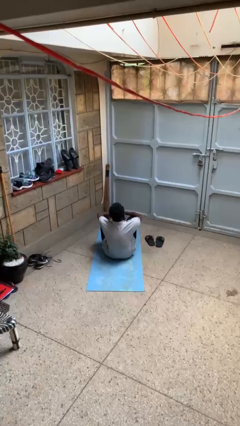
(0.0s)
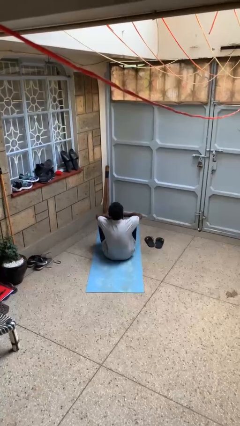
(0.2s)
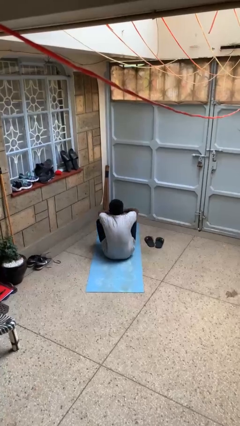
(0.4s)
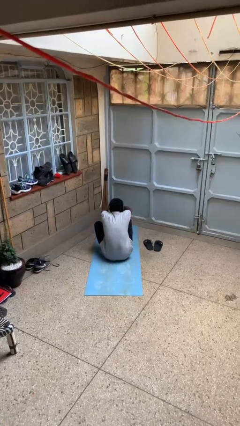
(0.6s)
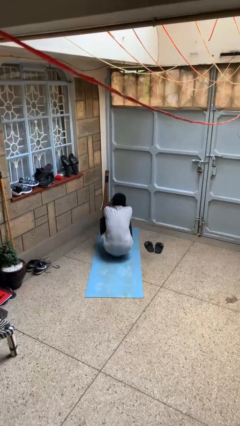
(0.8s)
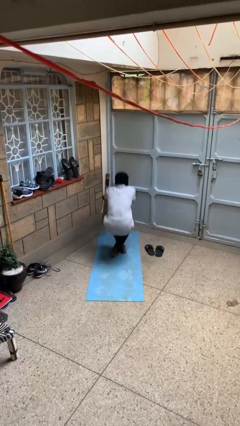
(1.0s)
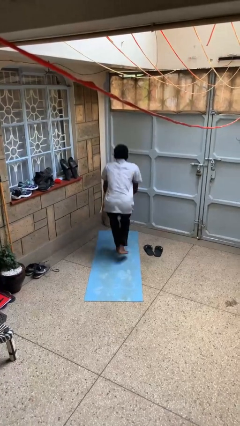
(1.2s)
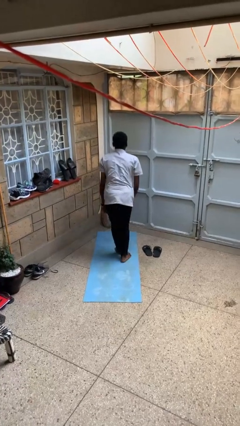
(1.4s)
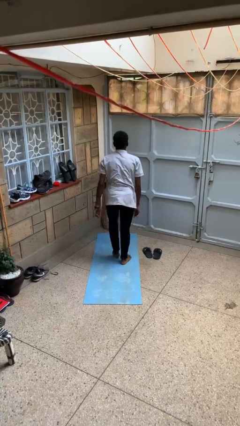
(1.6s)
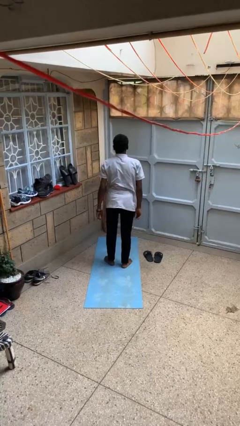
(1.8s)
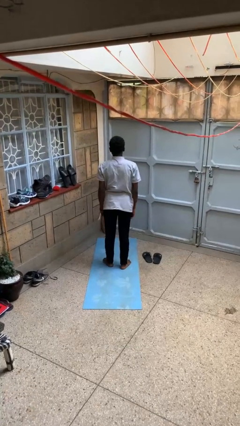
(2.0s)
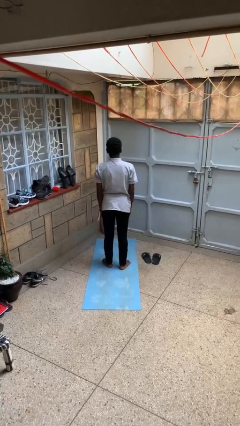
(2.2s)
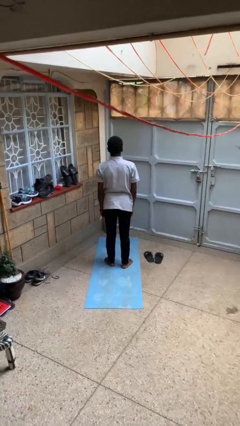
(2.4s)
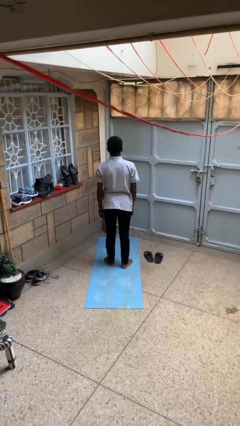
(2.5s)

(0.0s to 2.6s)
person stands up from floor

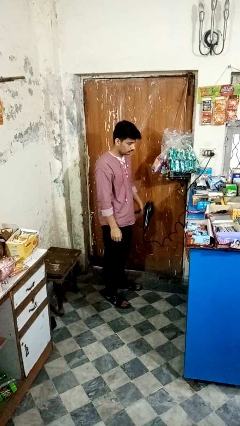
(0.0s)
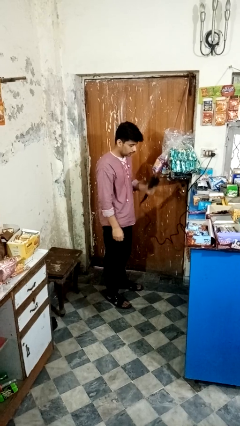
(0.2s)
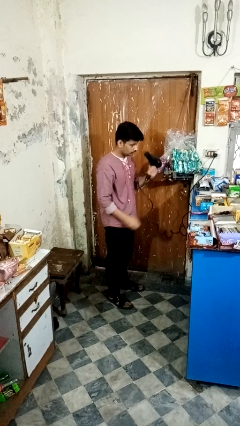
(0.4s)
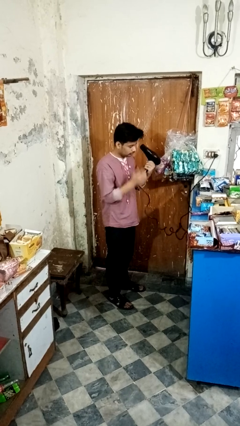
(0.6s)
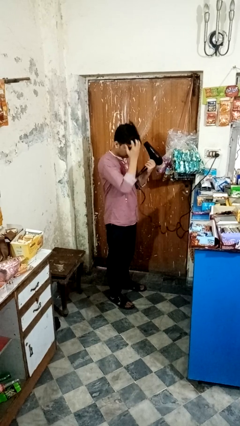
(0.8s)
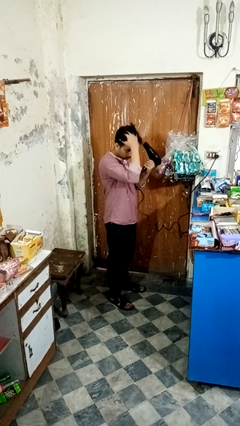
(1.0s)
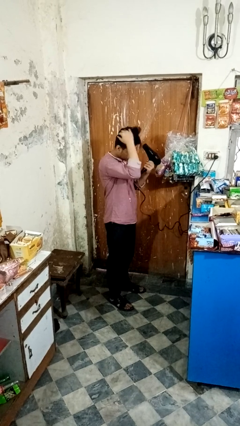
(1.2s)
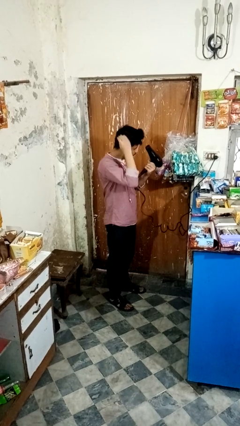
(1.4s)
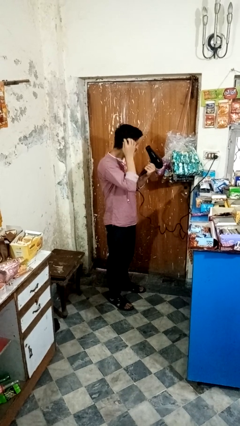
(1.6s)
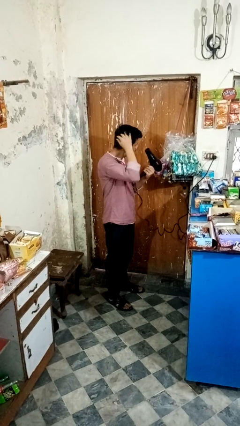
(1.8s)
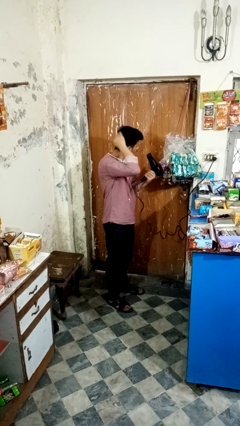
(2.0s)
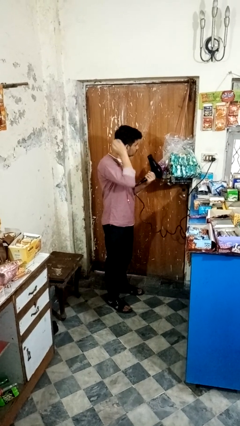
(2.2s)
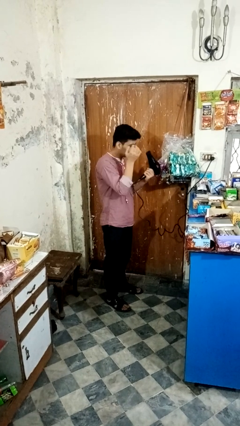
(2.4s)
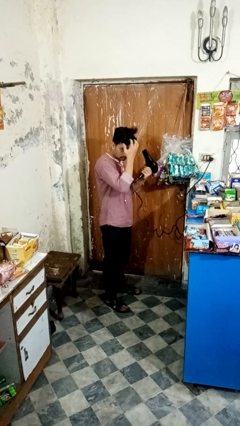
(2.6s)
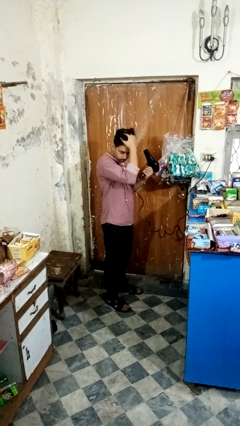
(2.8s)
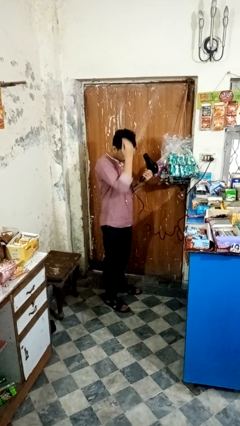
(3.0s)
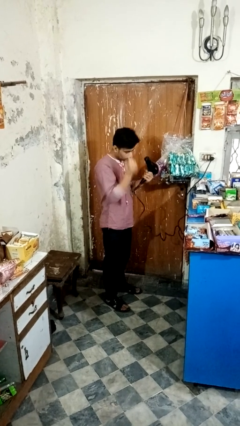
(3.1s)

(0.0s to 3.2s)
person dries hair with hairdryer

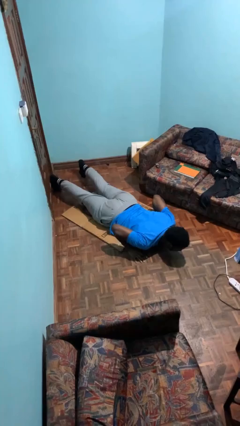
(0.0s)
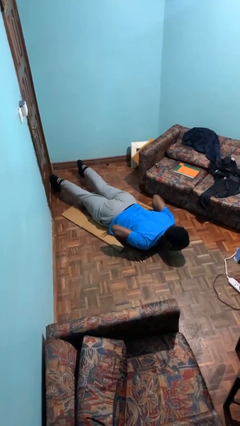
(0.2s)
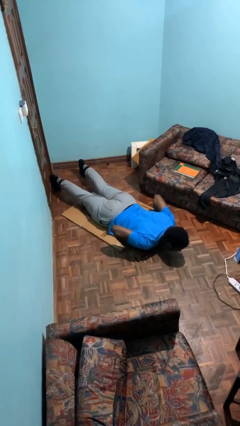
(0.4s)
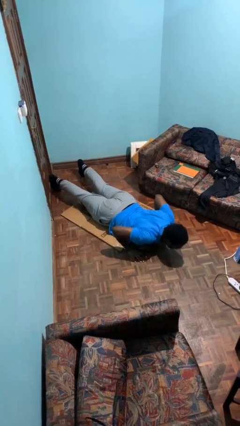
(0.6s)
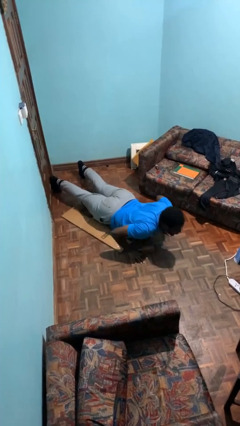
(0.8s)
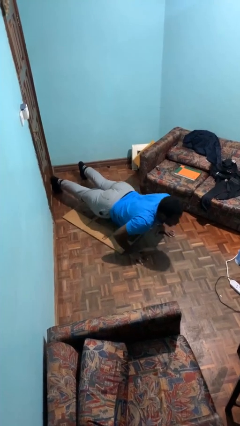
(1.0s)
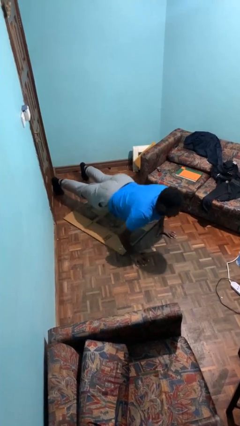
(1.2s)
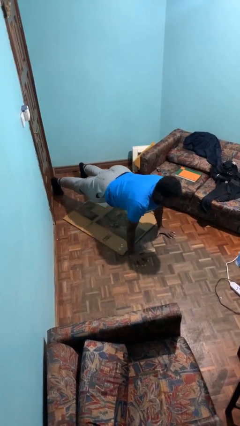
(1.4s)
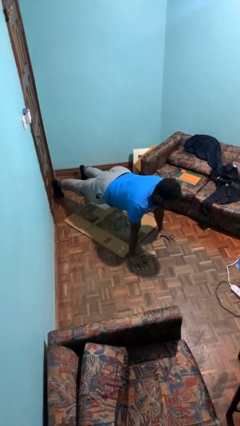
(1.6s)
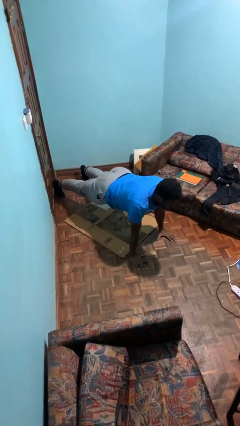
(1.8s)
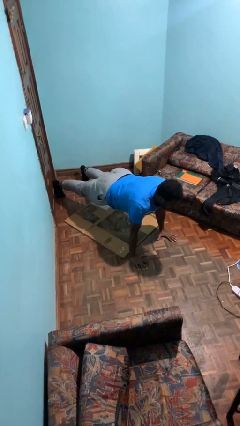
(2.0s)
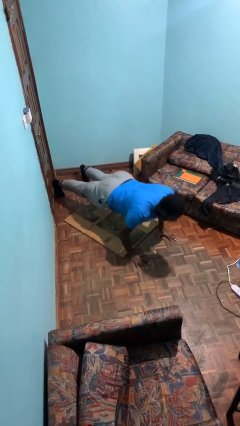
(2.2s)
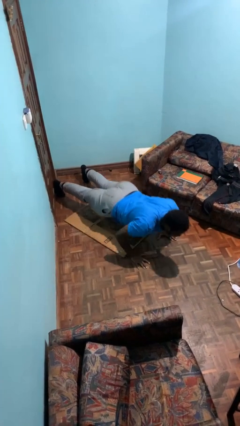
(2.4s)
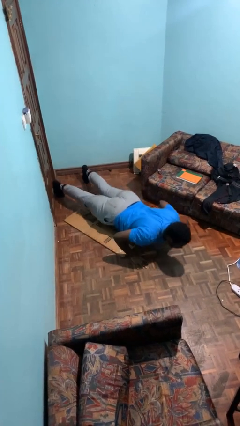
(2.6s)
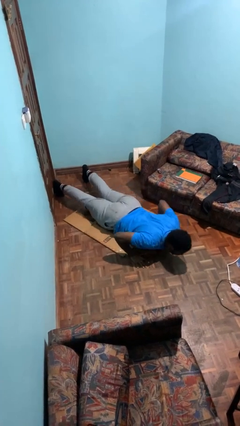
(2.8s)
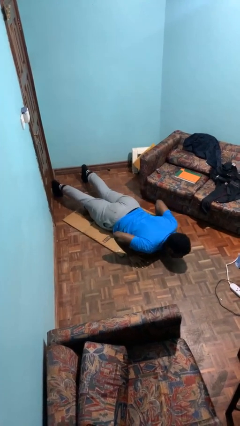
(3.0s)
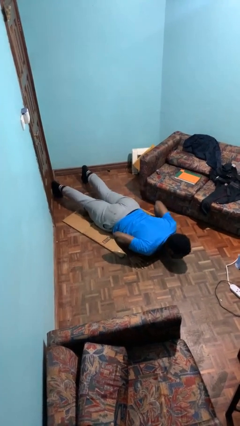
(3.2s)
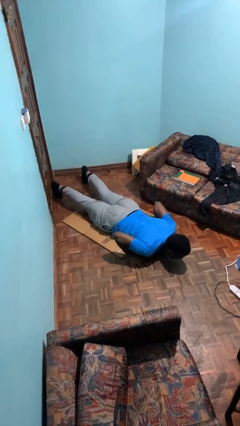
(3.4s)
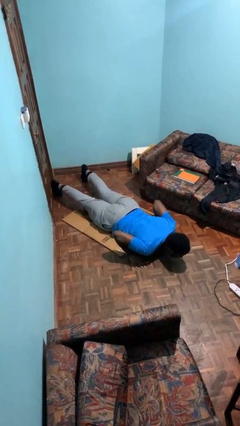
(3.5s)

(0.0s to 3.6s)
person exercises with pushup

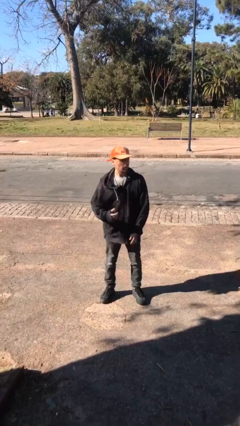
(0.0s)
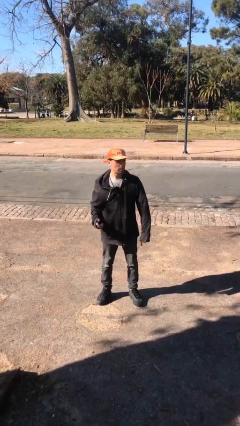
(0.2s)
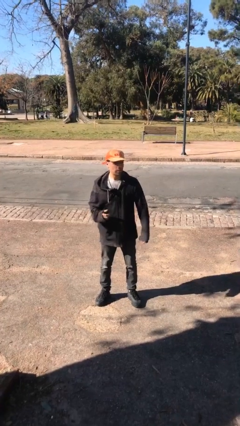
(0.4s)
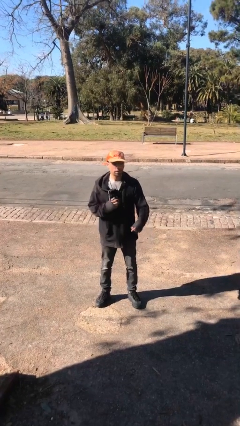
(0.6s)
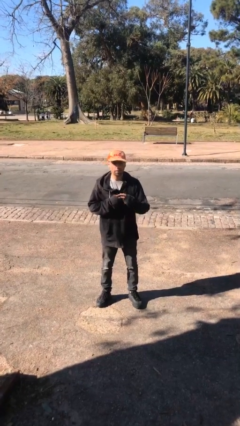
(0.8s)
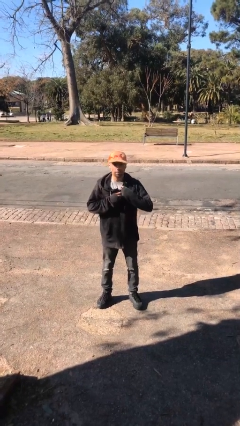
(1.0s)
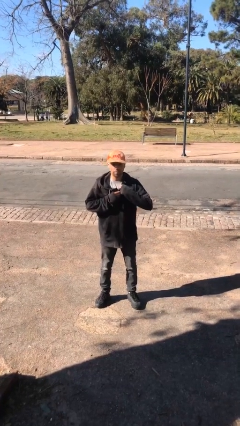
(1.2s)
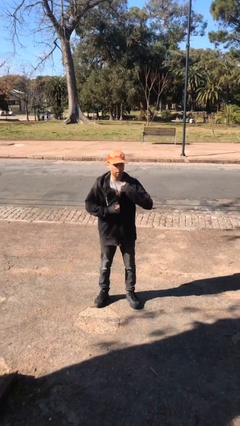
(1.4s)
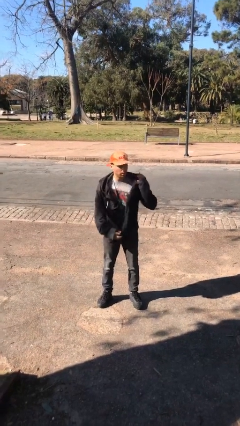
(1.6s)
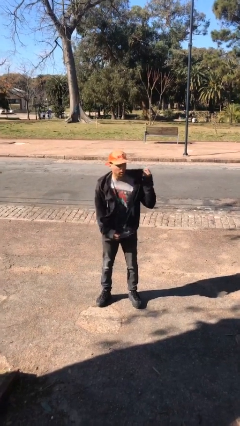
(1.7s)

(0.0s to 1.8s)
person unzips jacket

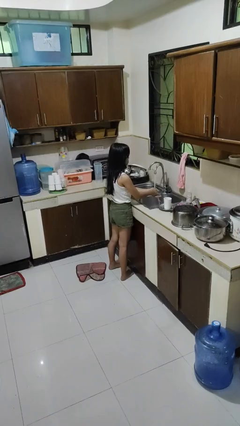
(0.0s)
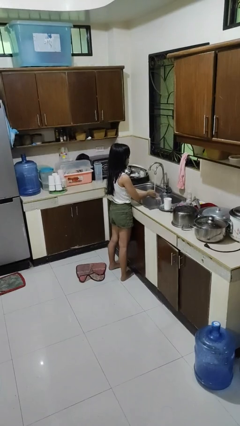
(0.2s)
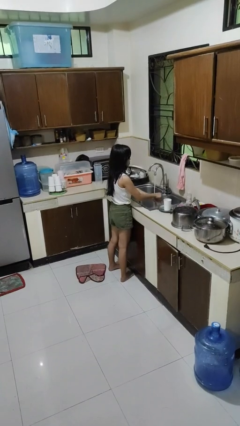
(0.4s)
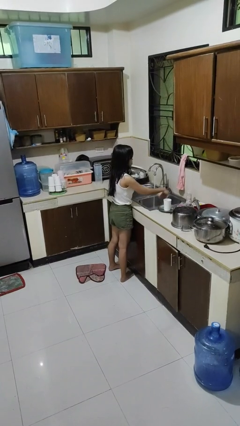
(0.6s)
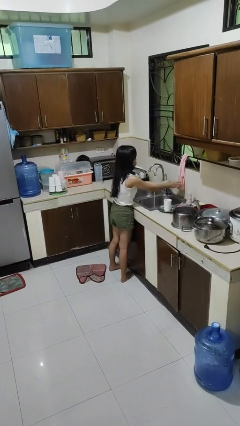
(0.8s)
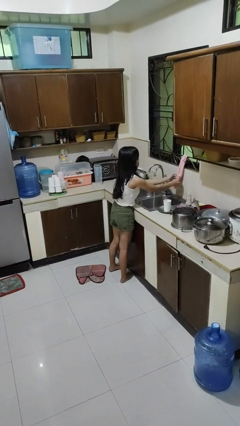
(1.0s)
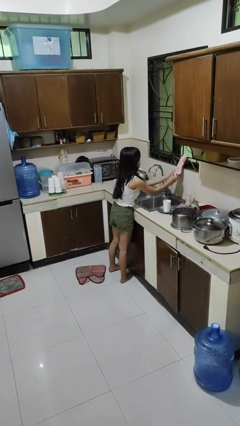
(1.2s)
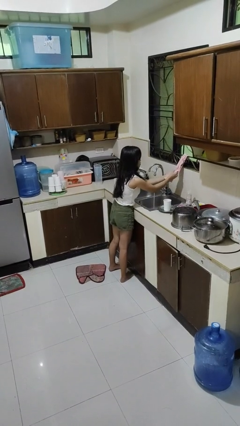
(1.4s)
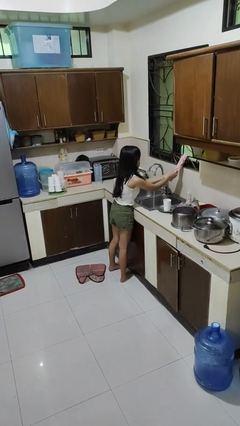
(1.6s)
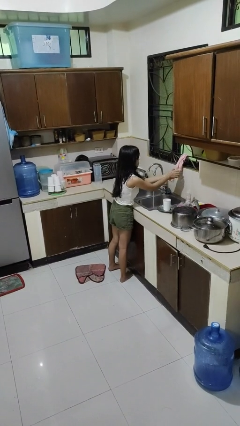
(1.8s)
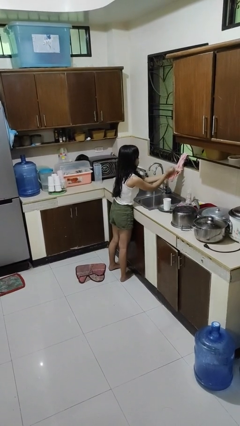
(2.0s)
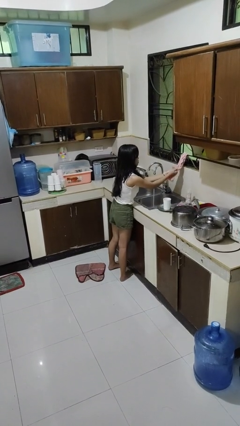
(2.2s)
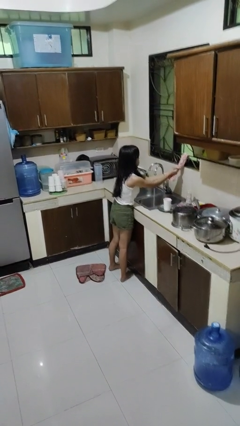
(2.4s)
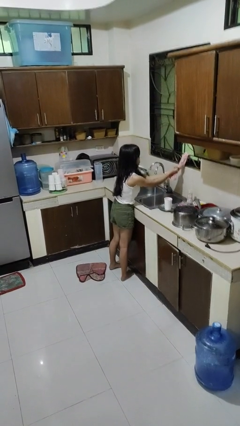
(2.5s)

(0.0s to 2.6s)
person dries hands with towel

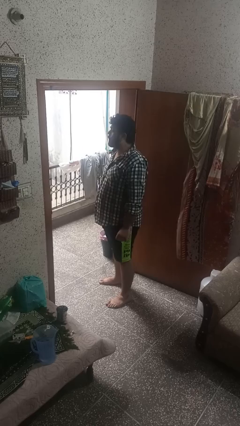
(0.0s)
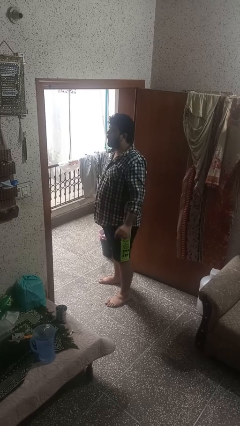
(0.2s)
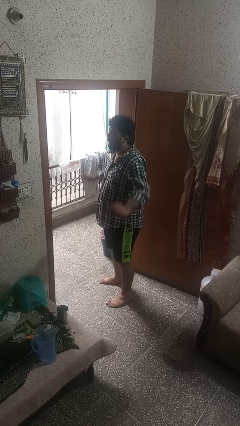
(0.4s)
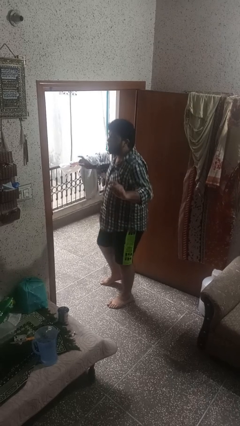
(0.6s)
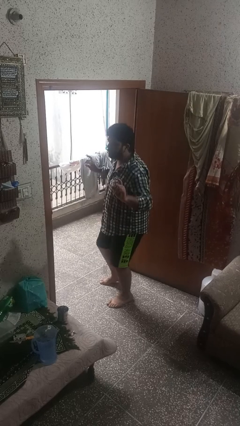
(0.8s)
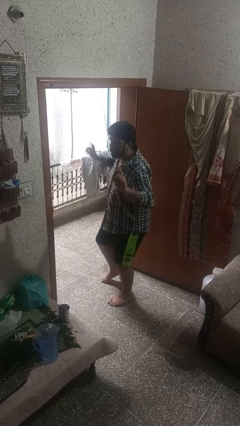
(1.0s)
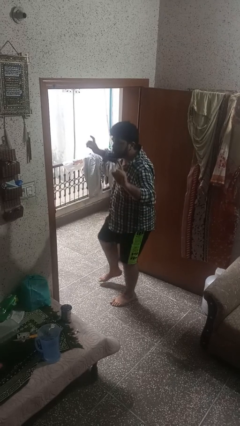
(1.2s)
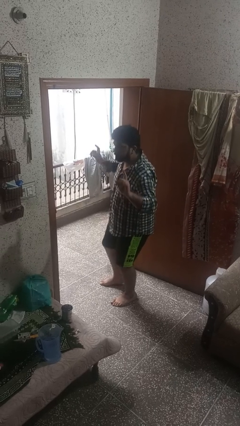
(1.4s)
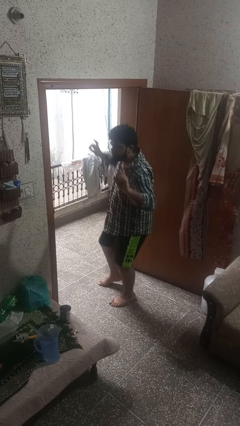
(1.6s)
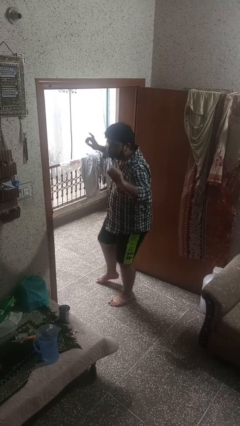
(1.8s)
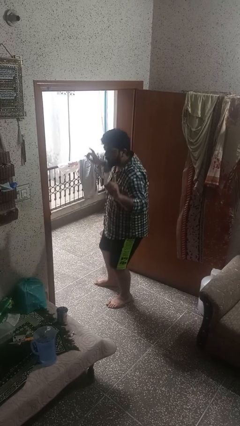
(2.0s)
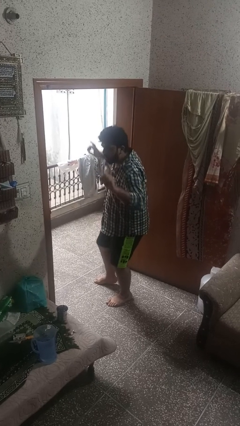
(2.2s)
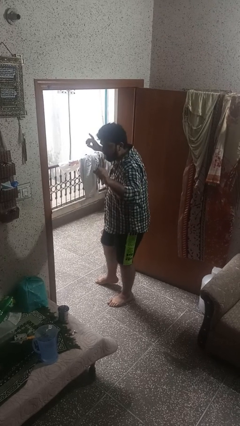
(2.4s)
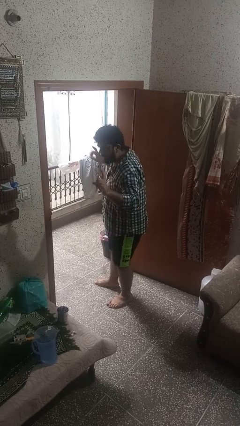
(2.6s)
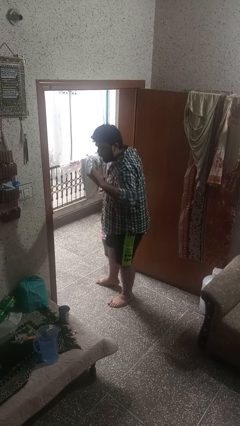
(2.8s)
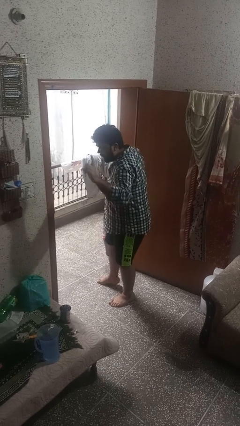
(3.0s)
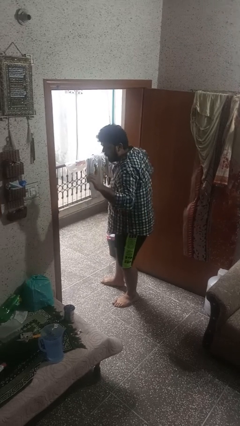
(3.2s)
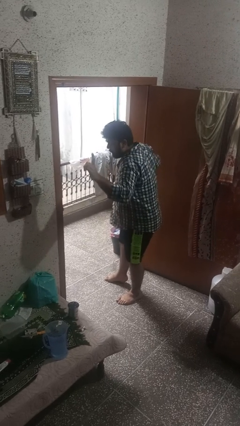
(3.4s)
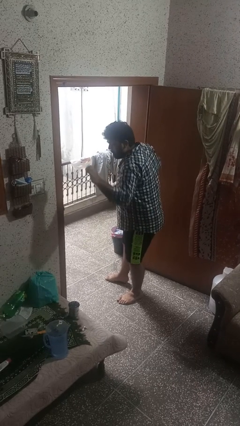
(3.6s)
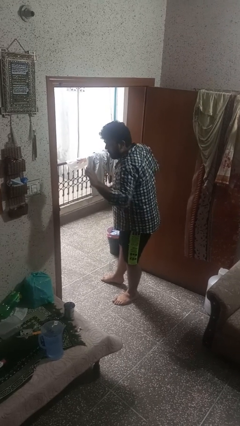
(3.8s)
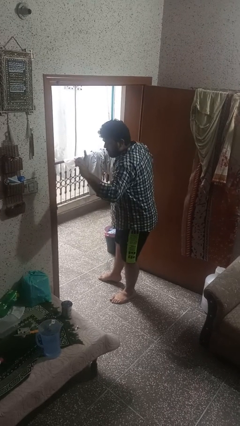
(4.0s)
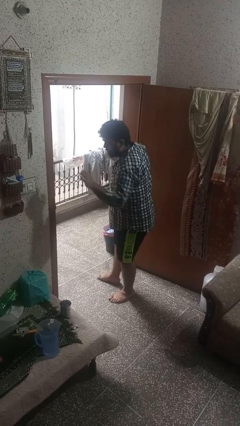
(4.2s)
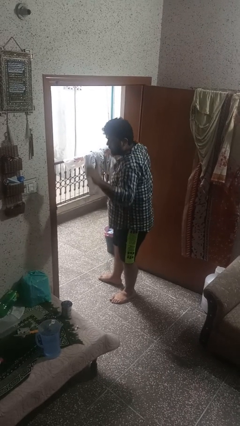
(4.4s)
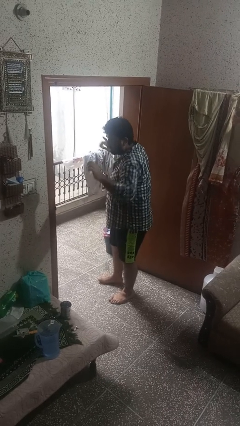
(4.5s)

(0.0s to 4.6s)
person dances in place
